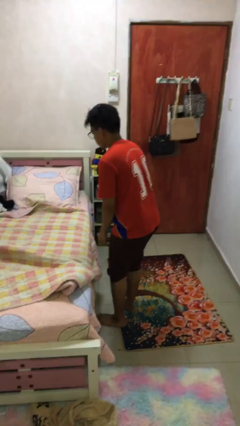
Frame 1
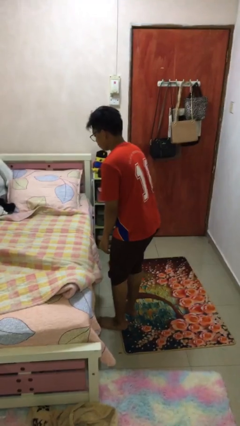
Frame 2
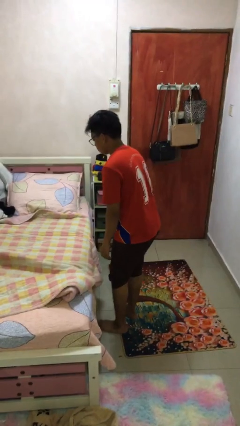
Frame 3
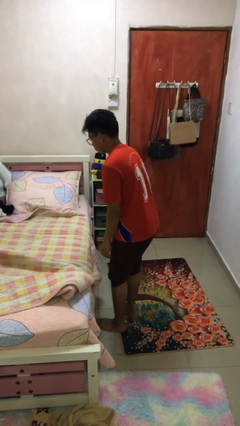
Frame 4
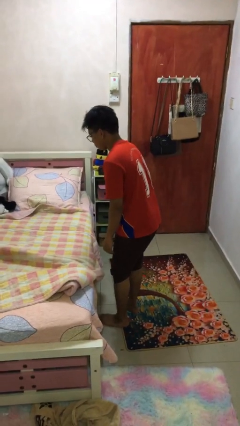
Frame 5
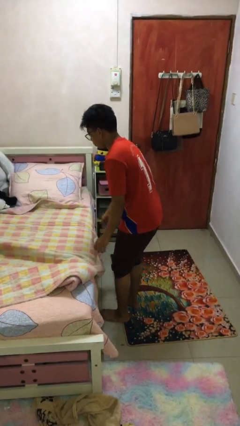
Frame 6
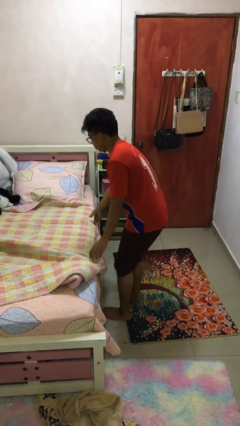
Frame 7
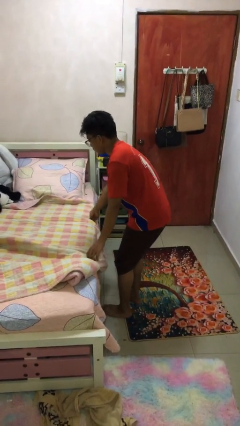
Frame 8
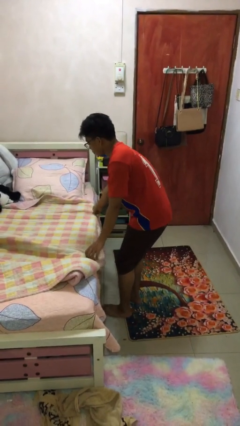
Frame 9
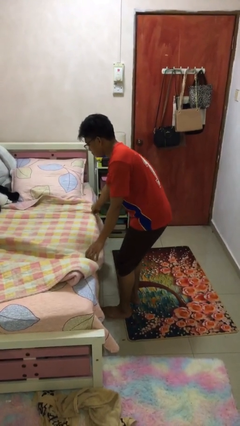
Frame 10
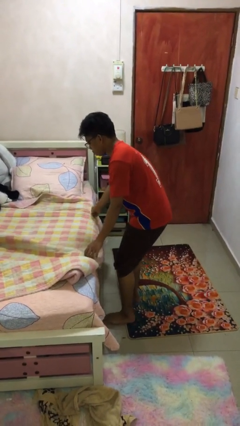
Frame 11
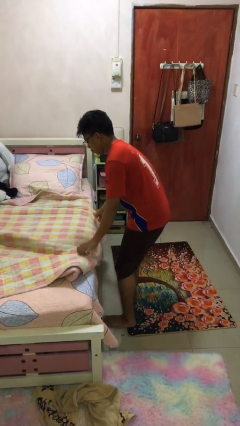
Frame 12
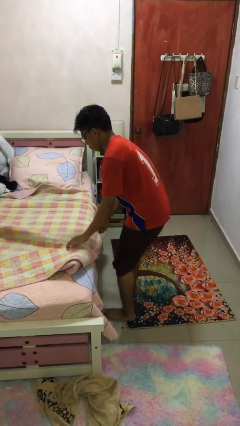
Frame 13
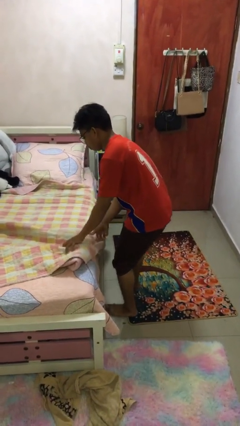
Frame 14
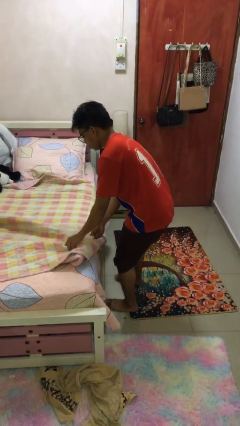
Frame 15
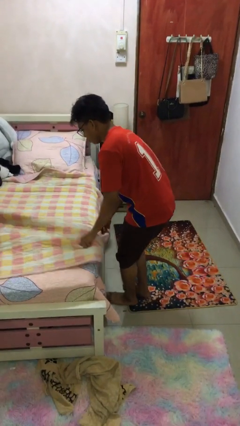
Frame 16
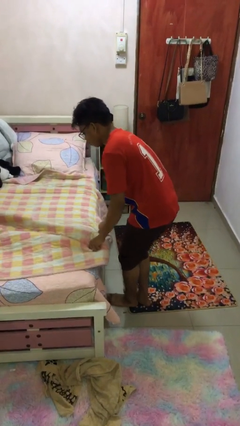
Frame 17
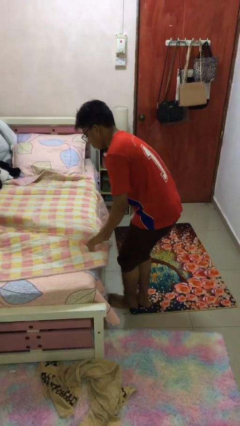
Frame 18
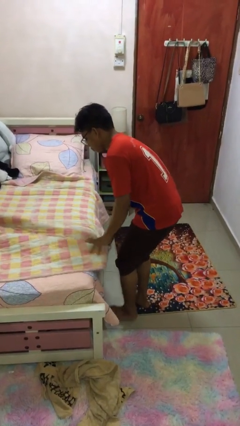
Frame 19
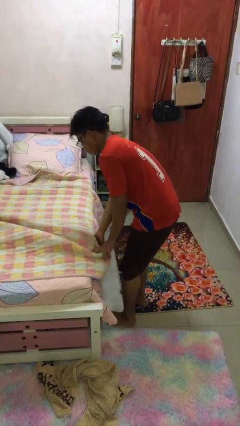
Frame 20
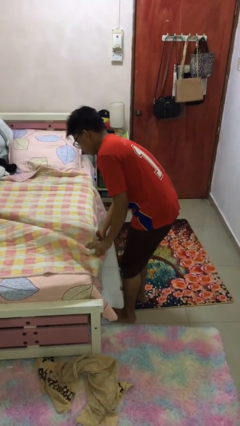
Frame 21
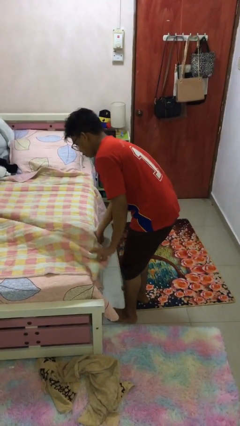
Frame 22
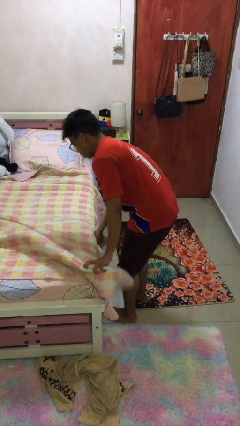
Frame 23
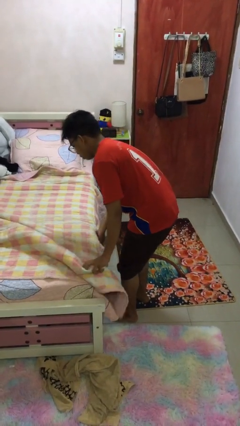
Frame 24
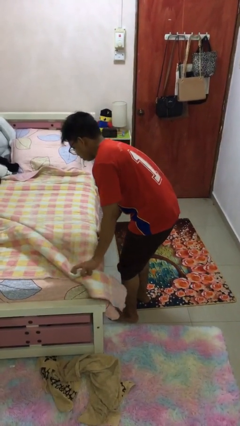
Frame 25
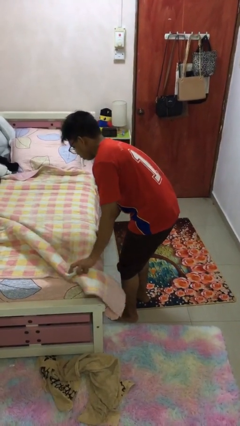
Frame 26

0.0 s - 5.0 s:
person makes bed

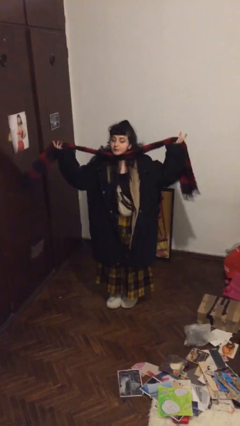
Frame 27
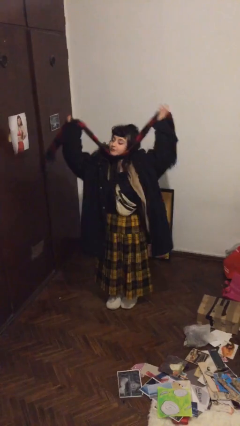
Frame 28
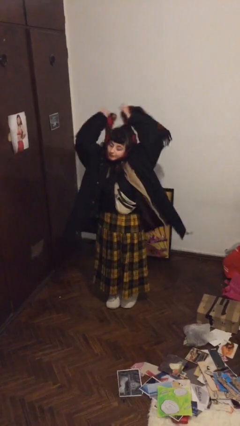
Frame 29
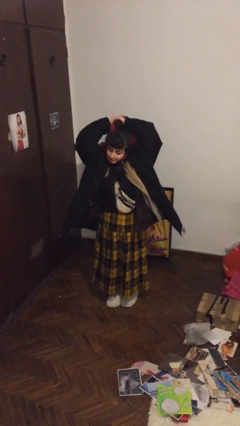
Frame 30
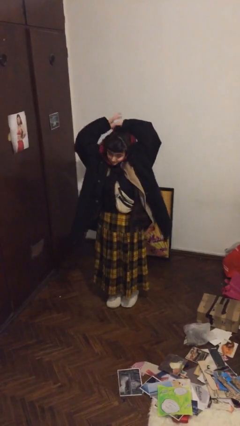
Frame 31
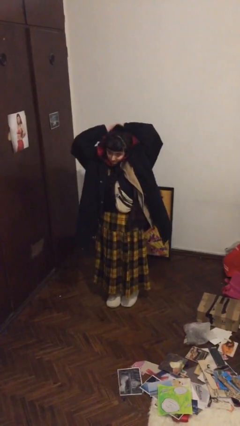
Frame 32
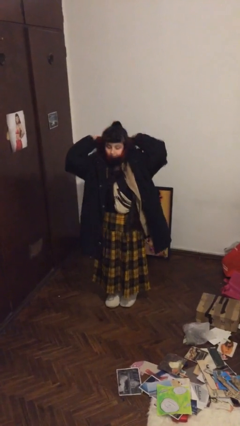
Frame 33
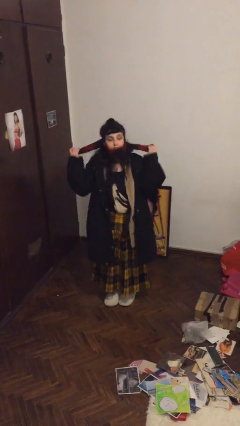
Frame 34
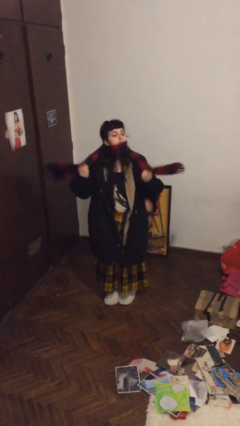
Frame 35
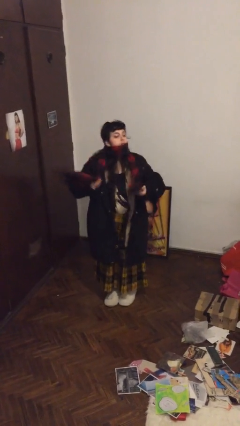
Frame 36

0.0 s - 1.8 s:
person puts on scarf

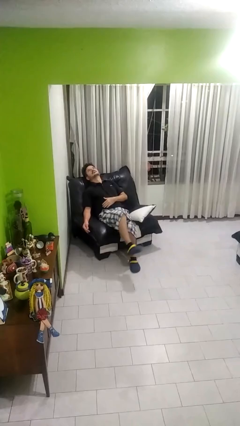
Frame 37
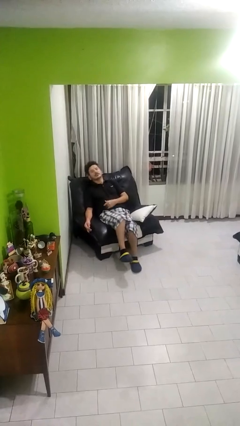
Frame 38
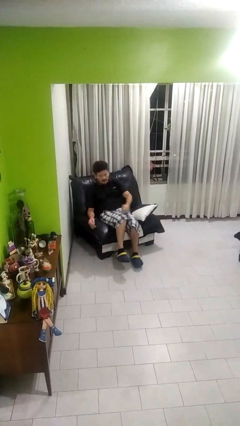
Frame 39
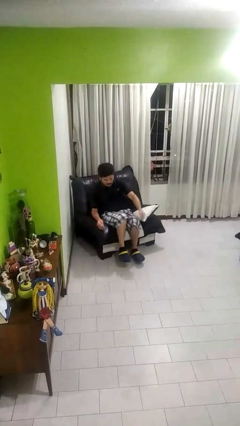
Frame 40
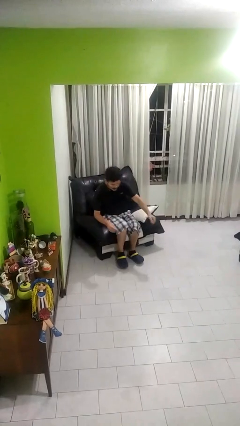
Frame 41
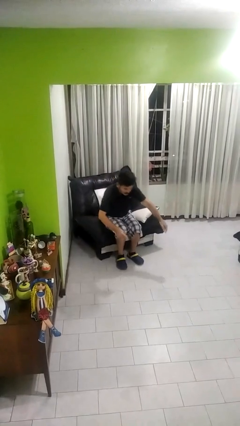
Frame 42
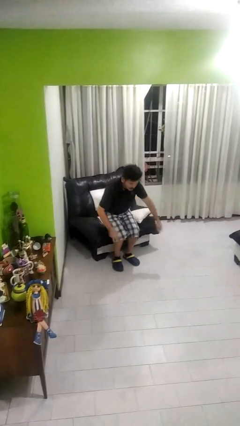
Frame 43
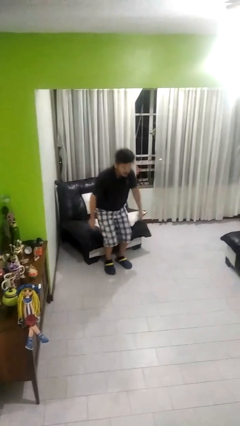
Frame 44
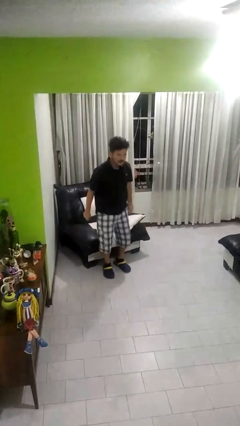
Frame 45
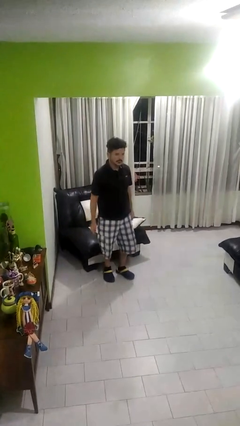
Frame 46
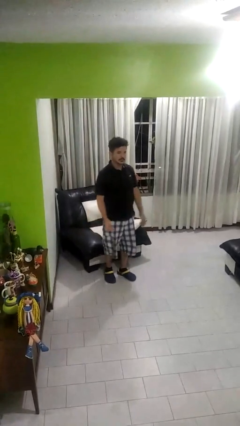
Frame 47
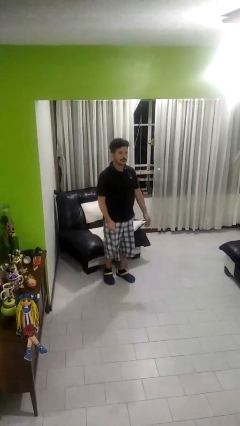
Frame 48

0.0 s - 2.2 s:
person stands up

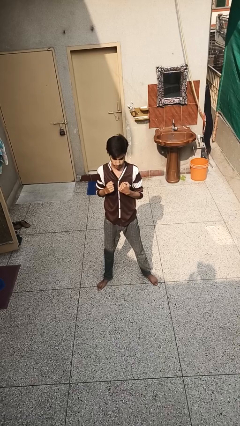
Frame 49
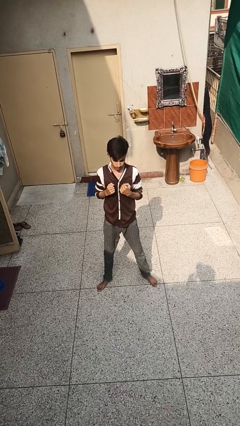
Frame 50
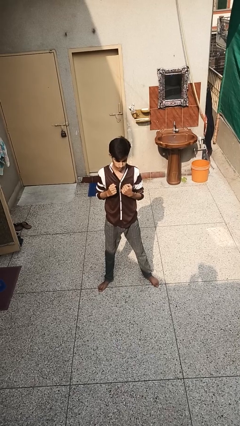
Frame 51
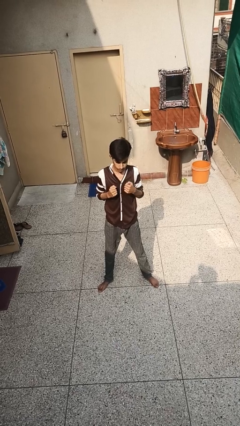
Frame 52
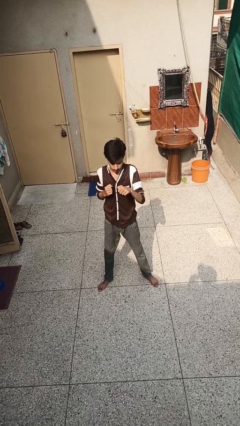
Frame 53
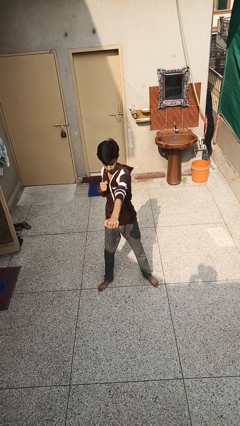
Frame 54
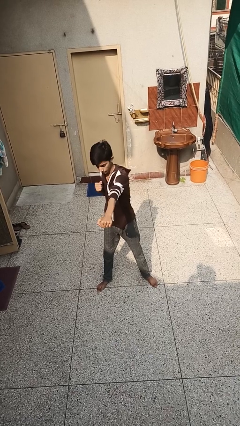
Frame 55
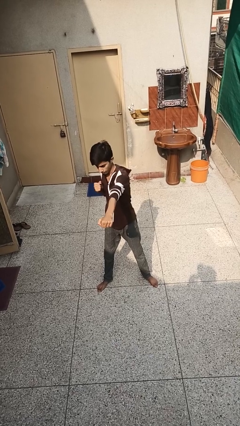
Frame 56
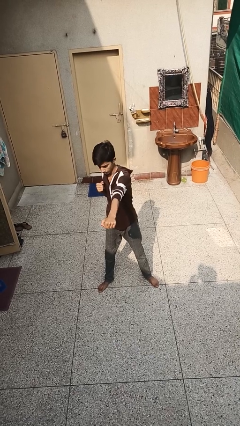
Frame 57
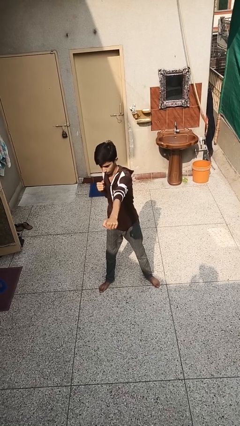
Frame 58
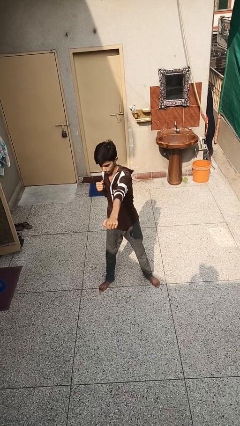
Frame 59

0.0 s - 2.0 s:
person punches

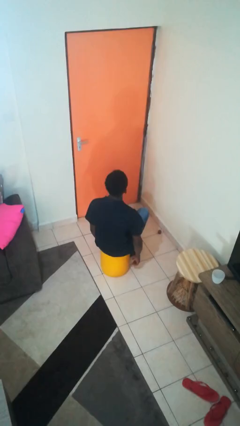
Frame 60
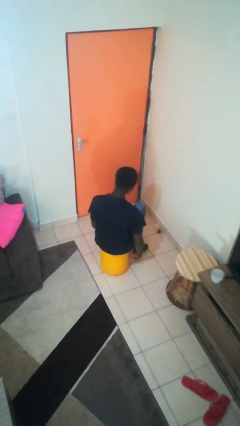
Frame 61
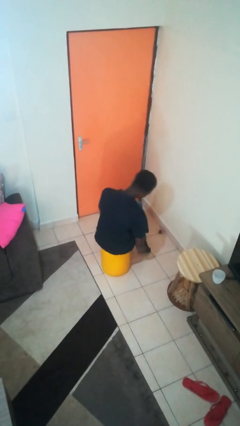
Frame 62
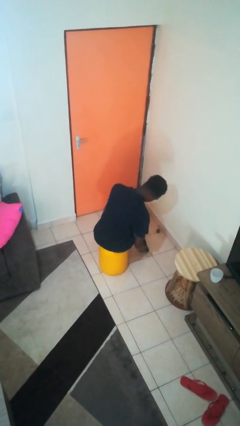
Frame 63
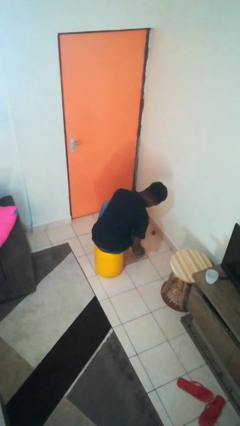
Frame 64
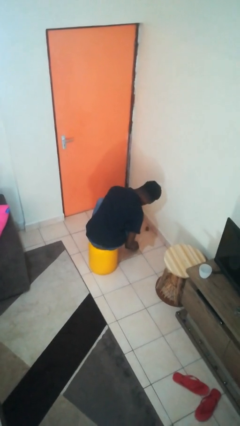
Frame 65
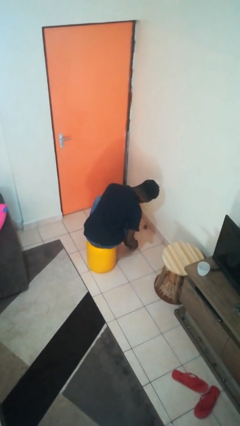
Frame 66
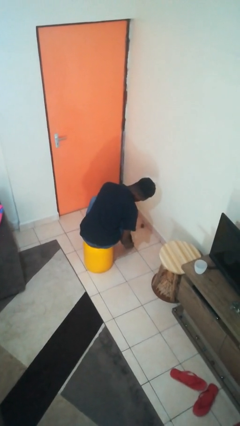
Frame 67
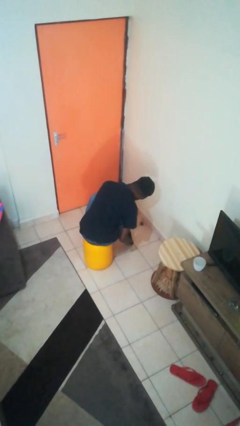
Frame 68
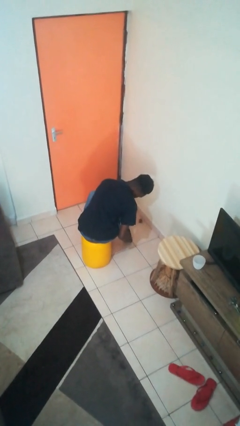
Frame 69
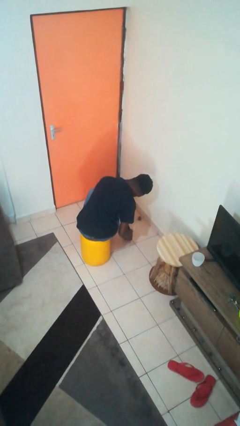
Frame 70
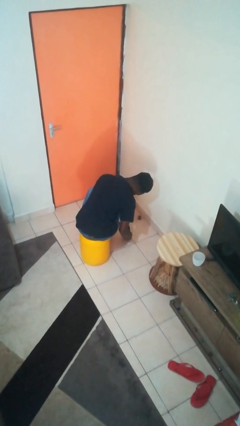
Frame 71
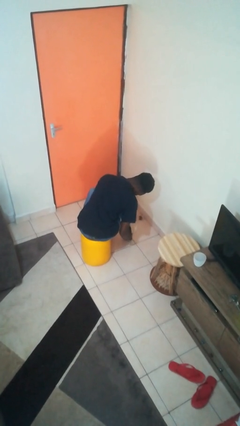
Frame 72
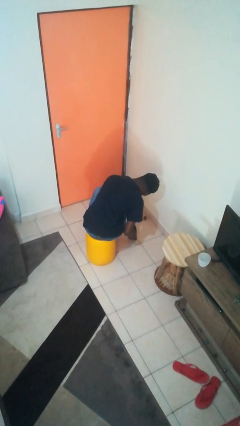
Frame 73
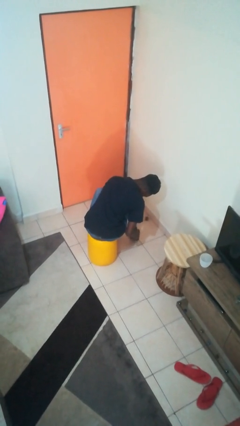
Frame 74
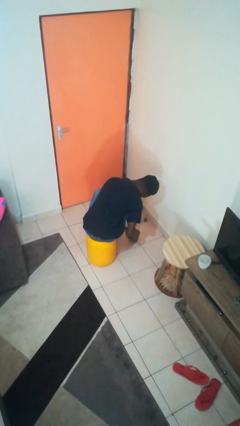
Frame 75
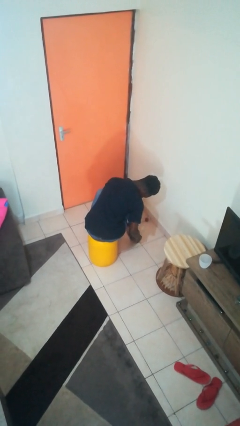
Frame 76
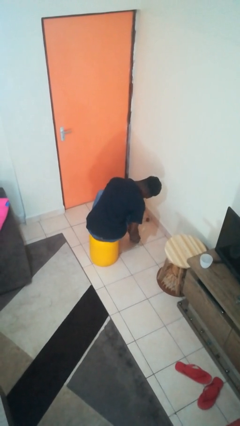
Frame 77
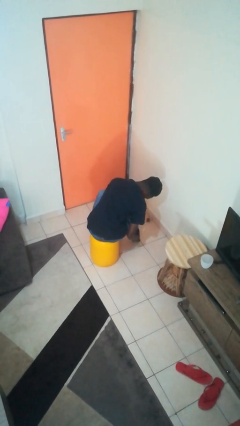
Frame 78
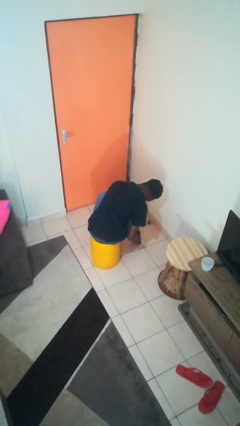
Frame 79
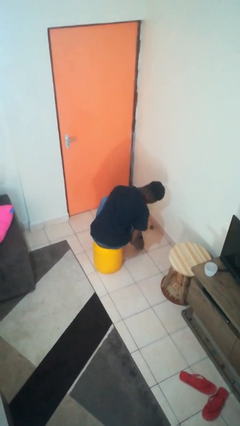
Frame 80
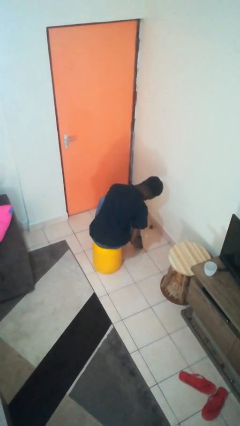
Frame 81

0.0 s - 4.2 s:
person rubs foot

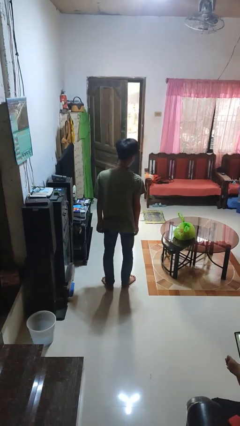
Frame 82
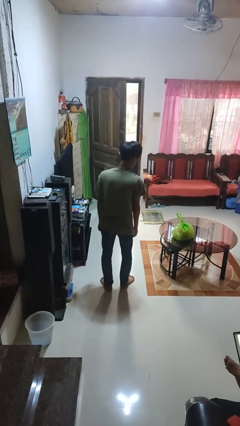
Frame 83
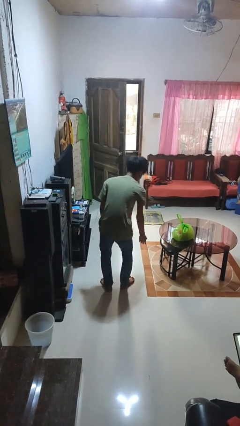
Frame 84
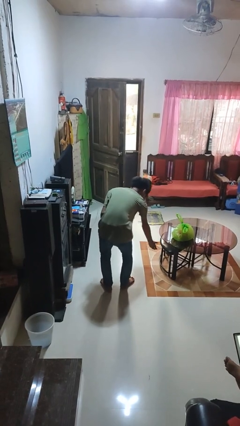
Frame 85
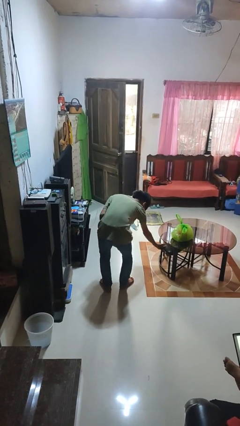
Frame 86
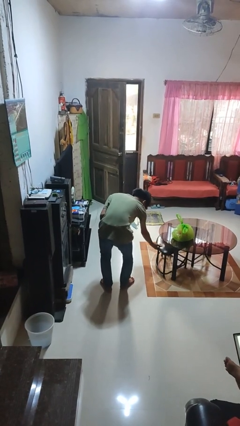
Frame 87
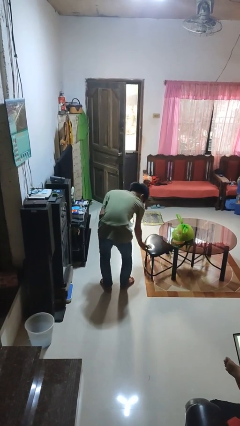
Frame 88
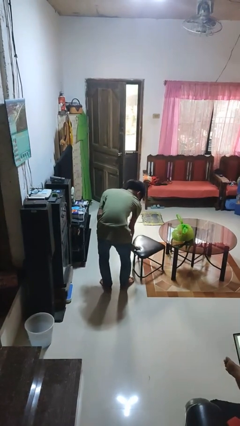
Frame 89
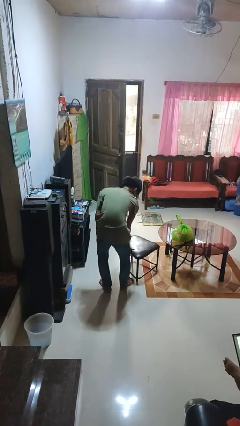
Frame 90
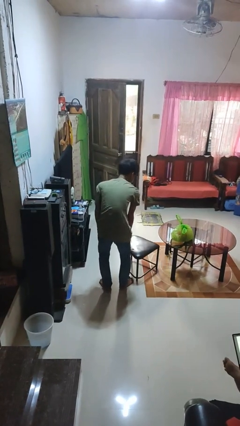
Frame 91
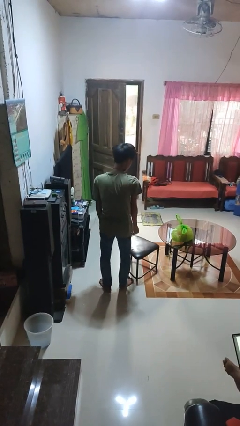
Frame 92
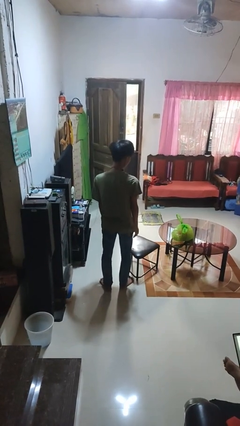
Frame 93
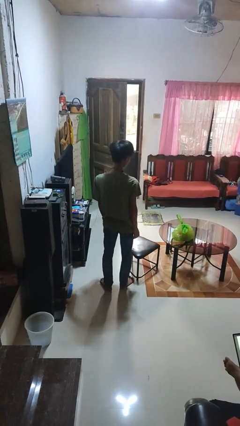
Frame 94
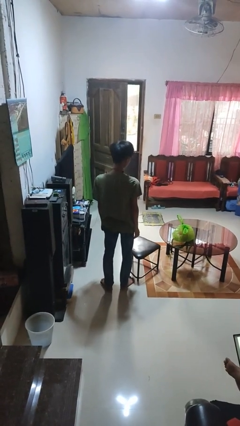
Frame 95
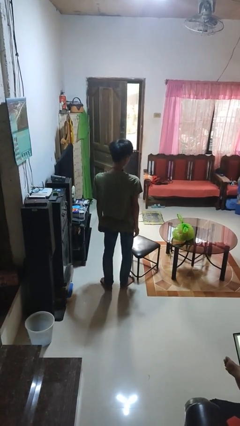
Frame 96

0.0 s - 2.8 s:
person pulls out chair
